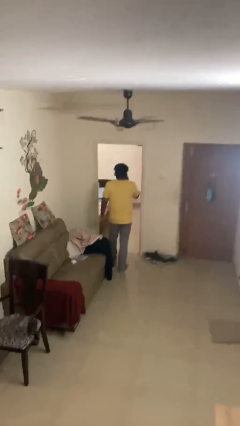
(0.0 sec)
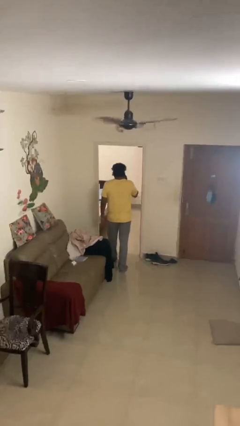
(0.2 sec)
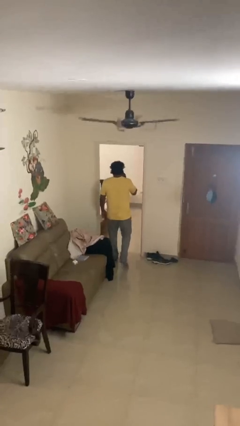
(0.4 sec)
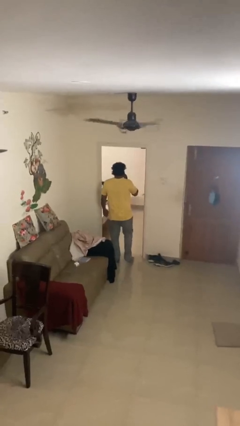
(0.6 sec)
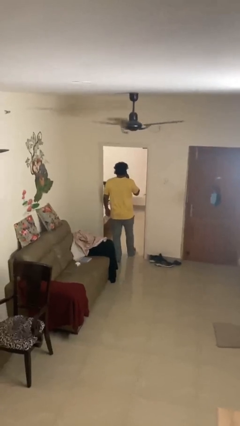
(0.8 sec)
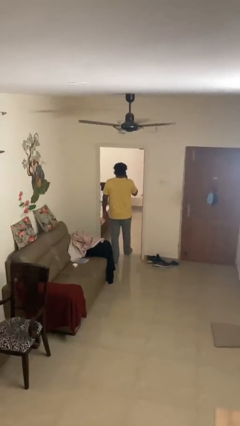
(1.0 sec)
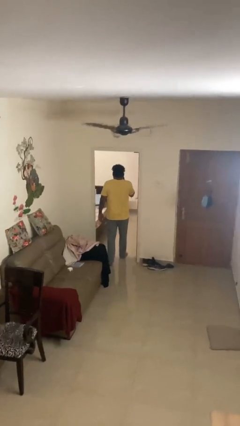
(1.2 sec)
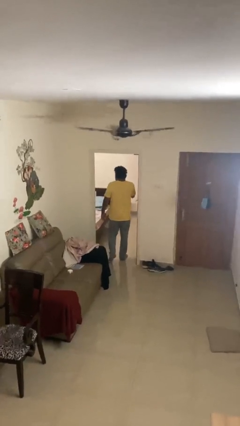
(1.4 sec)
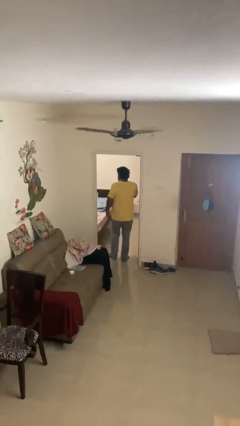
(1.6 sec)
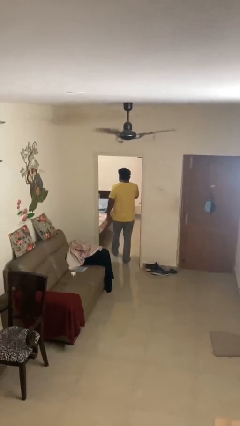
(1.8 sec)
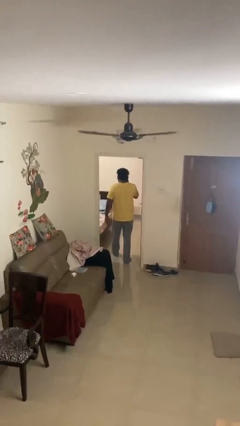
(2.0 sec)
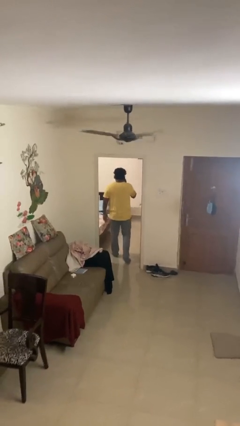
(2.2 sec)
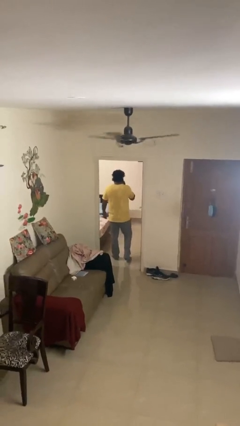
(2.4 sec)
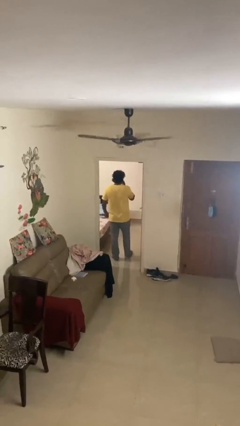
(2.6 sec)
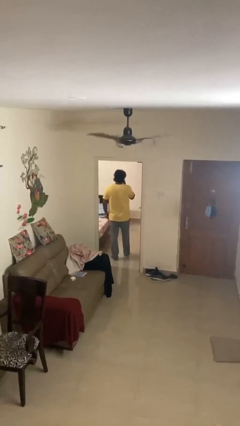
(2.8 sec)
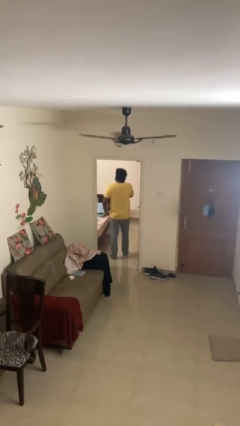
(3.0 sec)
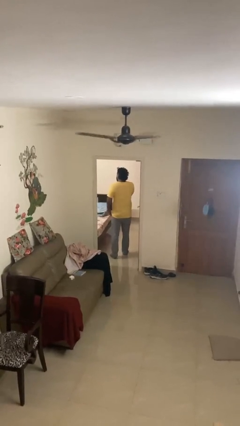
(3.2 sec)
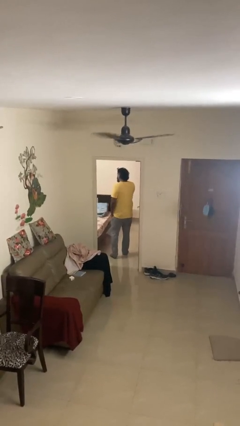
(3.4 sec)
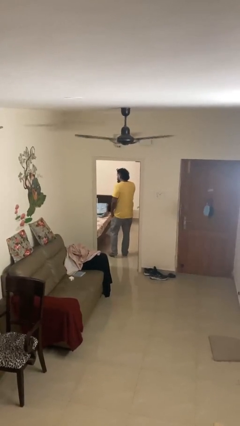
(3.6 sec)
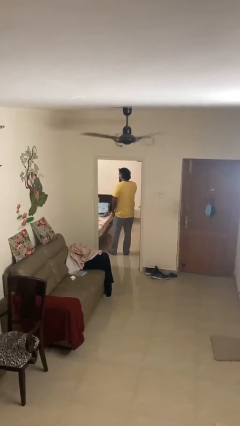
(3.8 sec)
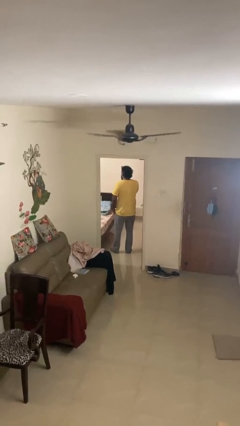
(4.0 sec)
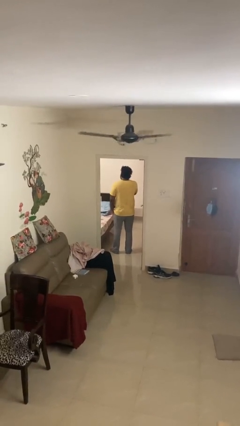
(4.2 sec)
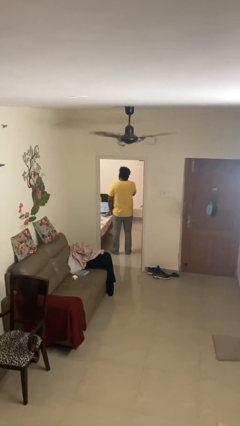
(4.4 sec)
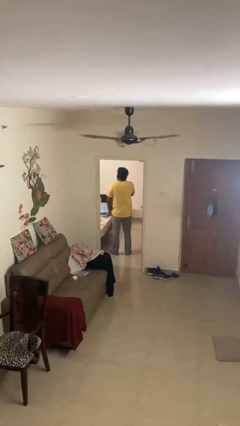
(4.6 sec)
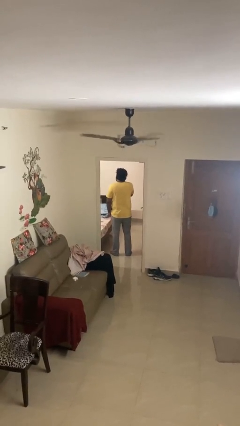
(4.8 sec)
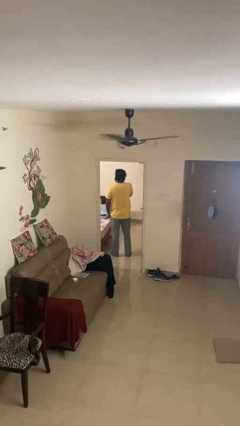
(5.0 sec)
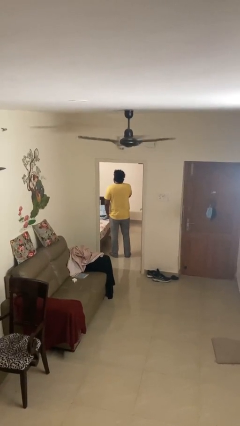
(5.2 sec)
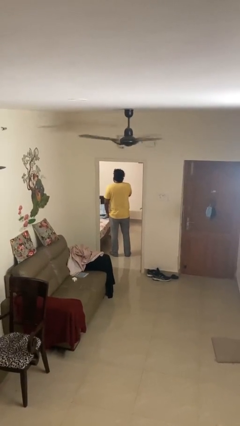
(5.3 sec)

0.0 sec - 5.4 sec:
person exits scene through structure

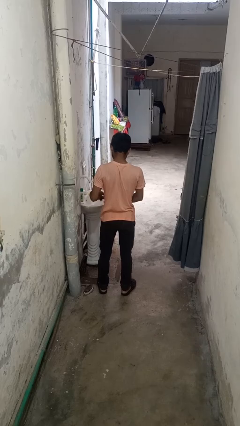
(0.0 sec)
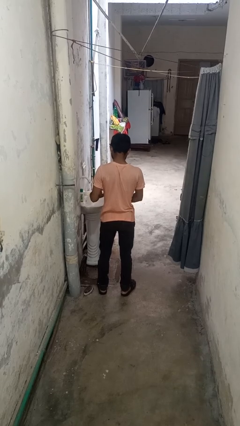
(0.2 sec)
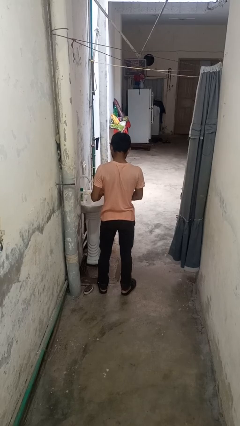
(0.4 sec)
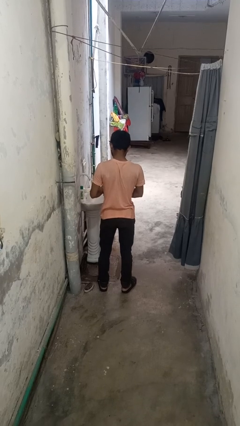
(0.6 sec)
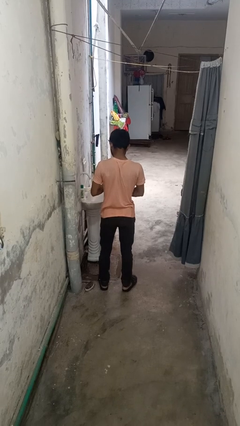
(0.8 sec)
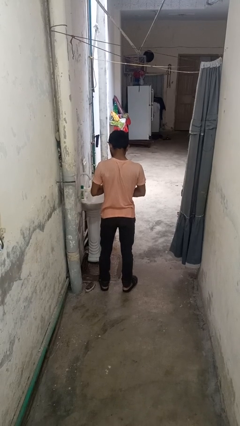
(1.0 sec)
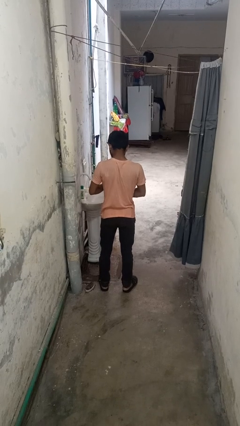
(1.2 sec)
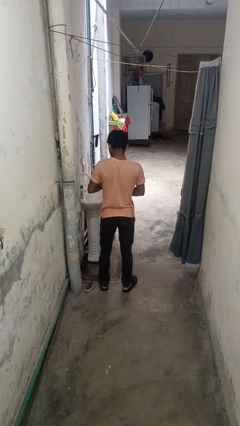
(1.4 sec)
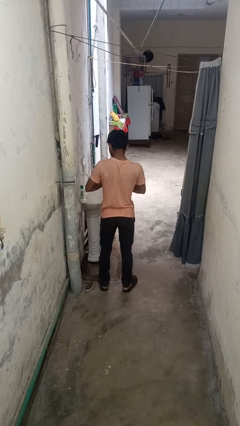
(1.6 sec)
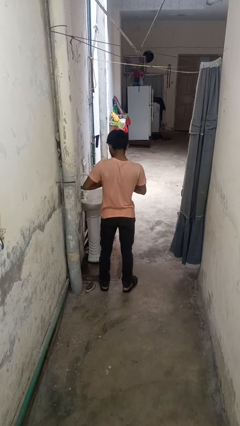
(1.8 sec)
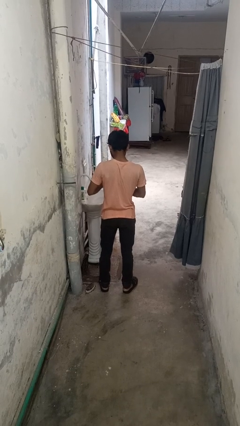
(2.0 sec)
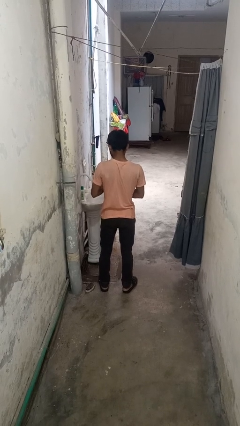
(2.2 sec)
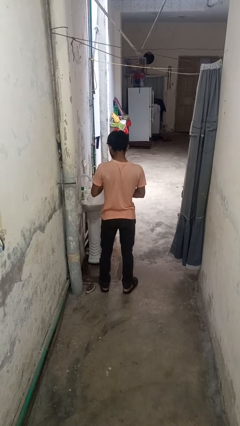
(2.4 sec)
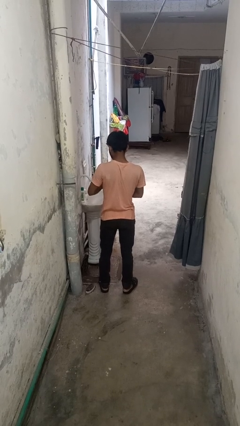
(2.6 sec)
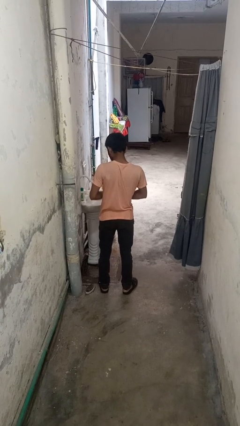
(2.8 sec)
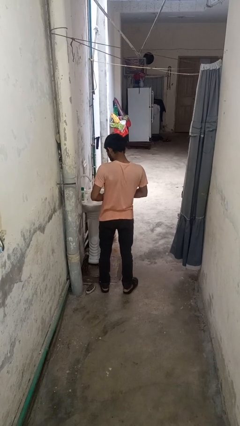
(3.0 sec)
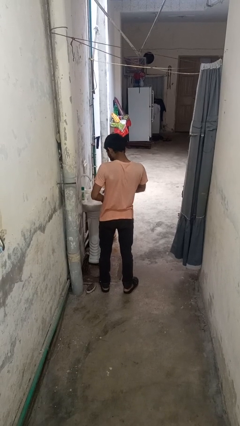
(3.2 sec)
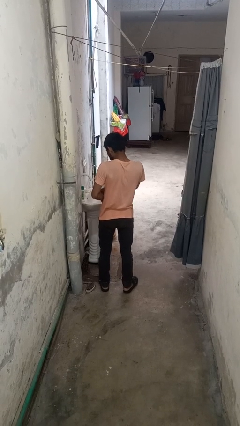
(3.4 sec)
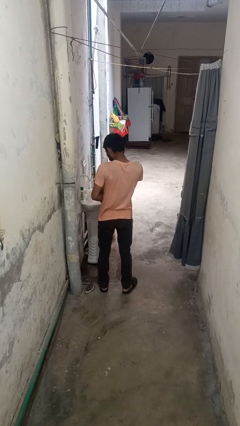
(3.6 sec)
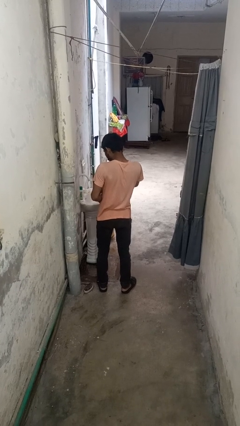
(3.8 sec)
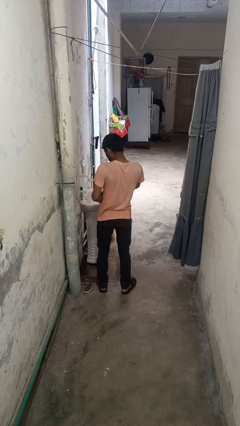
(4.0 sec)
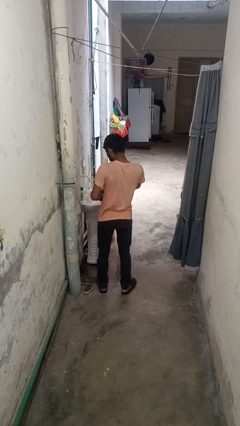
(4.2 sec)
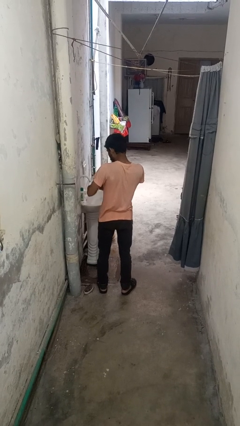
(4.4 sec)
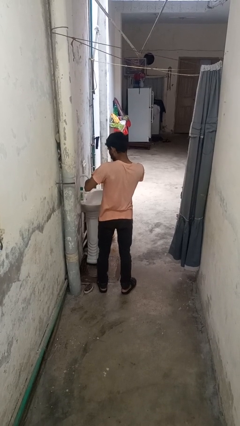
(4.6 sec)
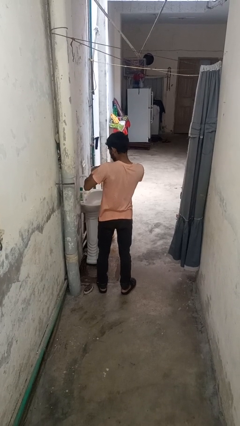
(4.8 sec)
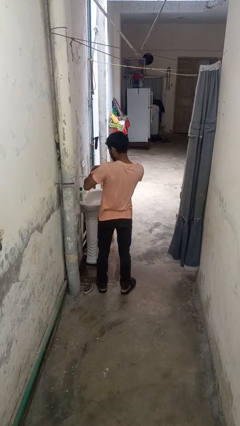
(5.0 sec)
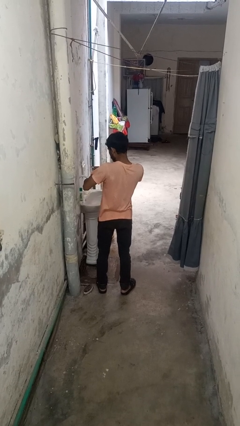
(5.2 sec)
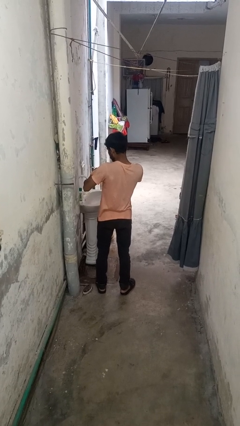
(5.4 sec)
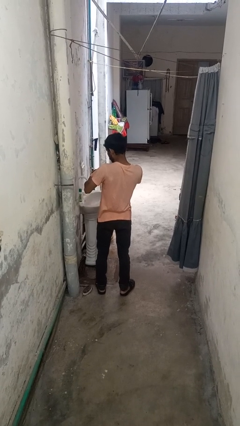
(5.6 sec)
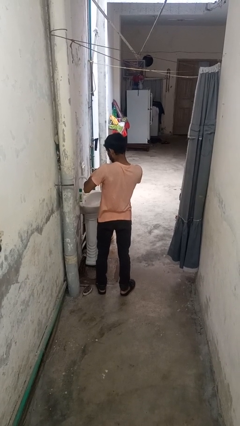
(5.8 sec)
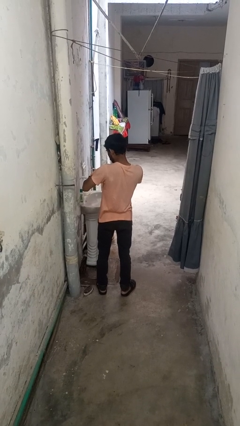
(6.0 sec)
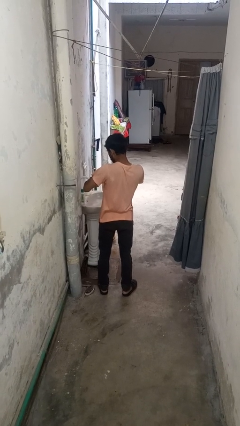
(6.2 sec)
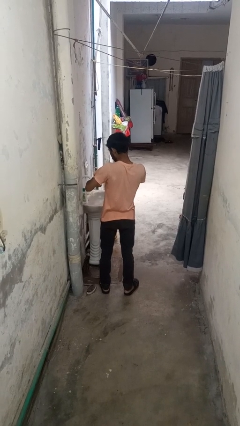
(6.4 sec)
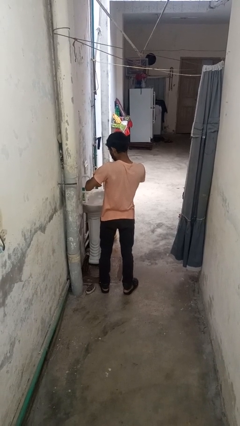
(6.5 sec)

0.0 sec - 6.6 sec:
person puts on wristwatch

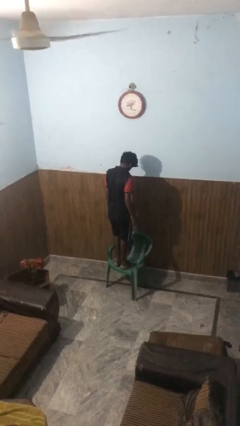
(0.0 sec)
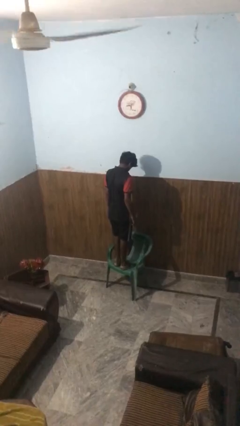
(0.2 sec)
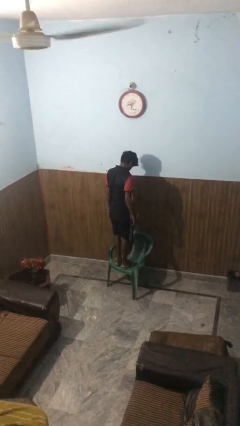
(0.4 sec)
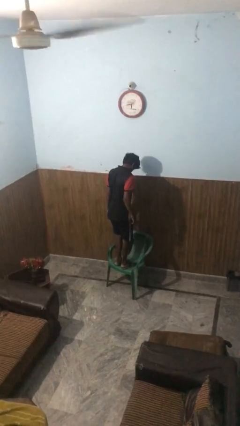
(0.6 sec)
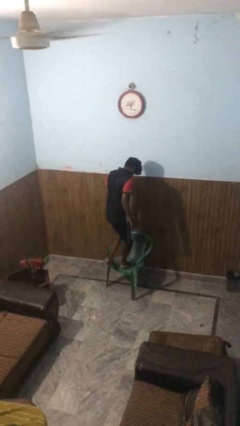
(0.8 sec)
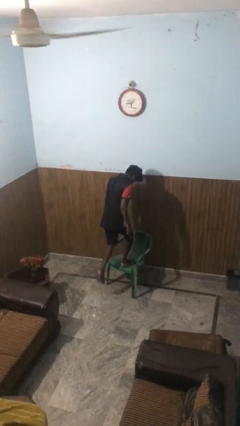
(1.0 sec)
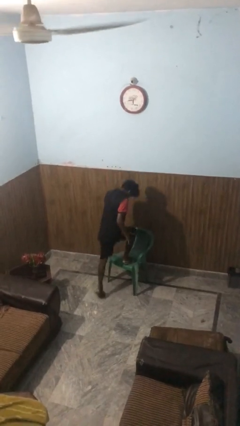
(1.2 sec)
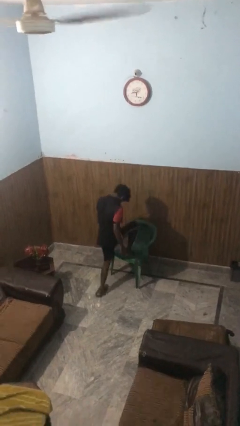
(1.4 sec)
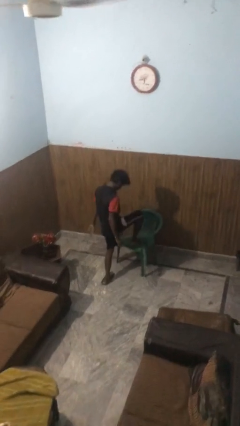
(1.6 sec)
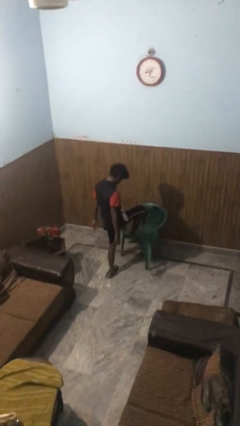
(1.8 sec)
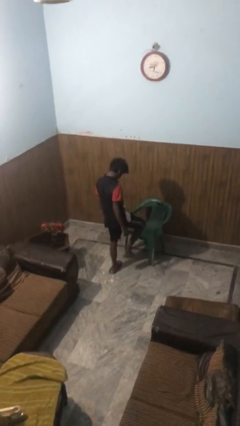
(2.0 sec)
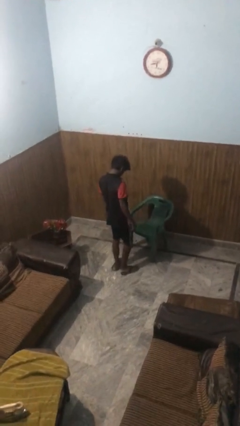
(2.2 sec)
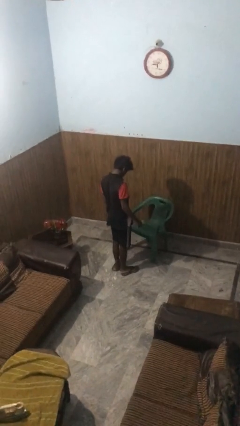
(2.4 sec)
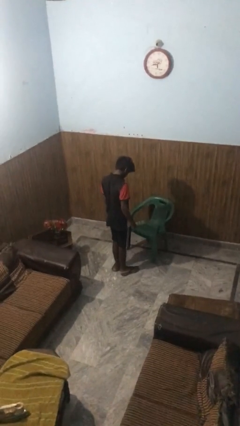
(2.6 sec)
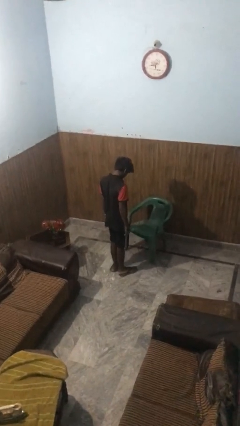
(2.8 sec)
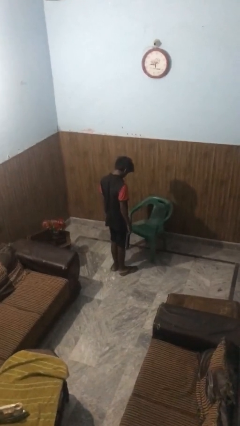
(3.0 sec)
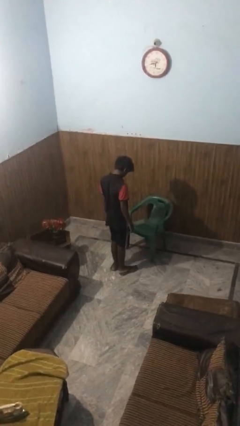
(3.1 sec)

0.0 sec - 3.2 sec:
person climbs off chair

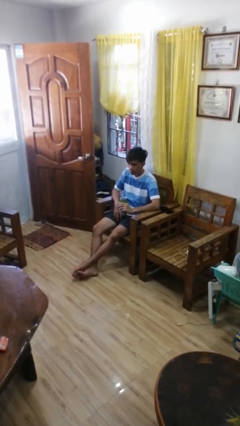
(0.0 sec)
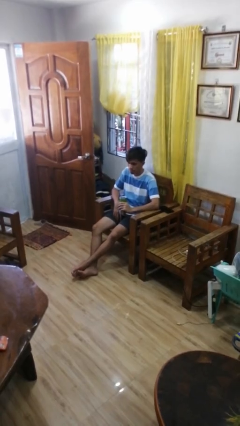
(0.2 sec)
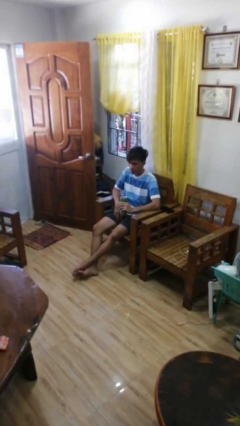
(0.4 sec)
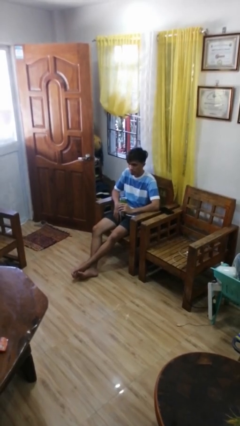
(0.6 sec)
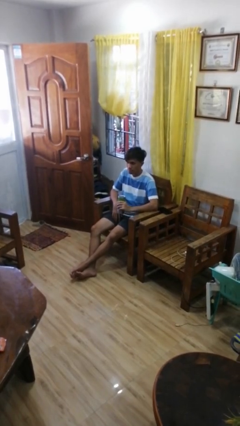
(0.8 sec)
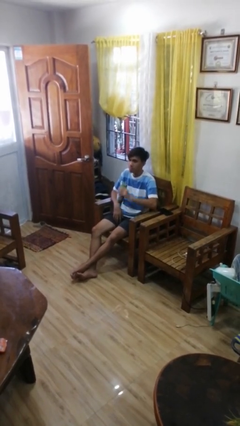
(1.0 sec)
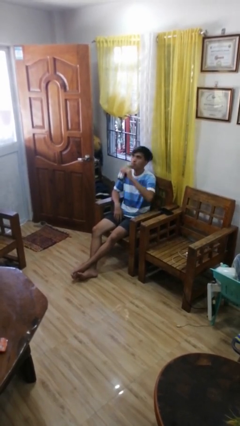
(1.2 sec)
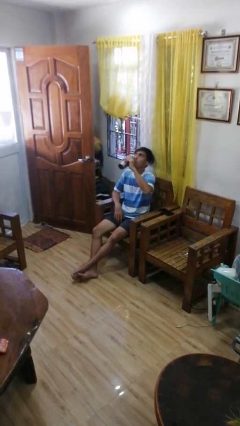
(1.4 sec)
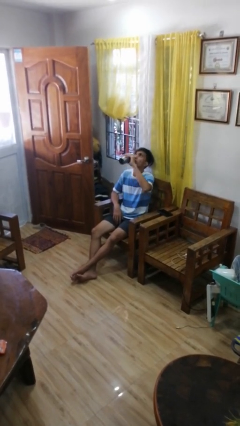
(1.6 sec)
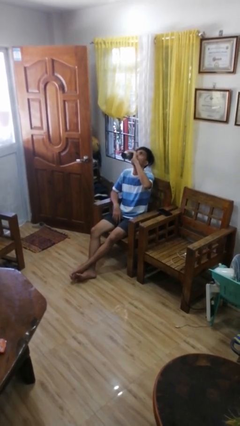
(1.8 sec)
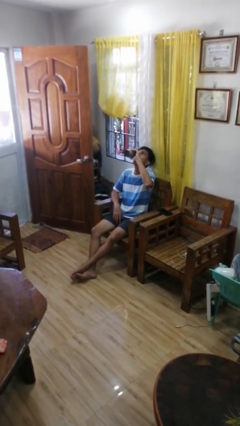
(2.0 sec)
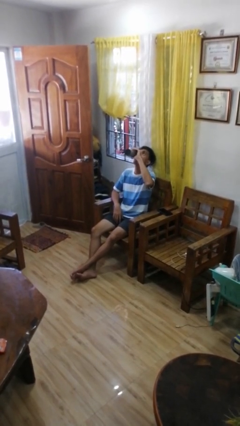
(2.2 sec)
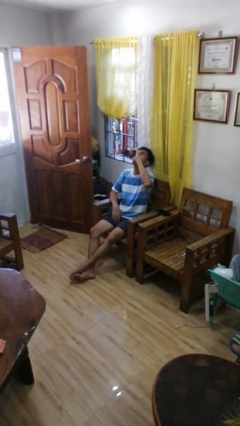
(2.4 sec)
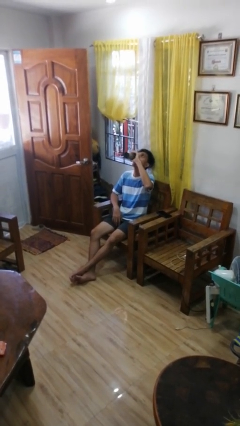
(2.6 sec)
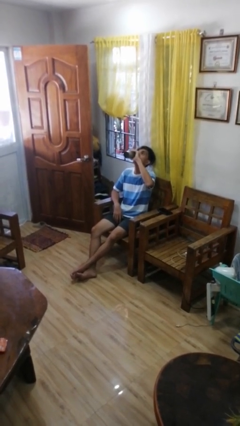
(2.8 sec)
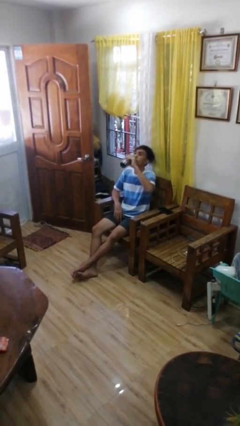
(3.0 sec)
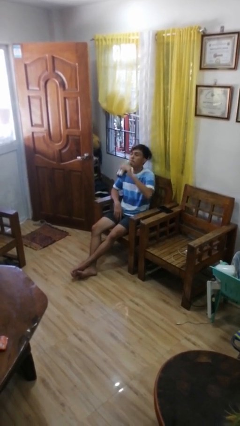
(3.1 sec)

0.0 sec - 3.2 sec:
person drinks from bottle
